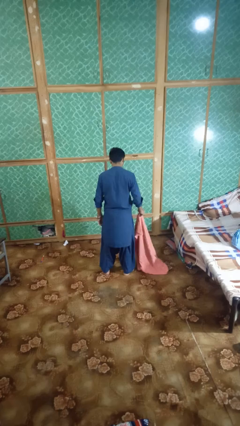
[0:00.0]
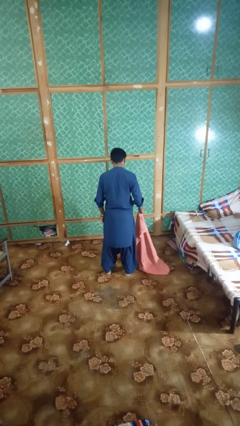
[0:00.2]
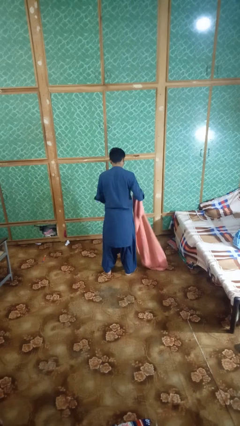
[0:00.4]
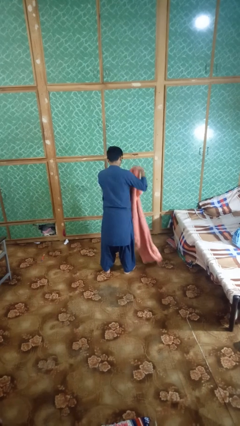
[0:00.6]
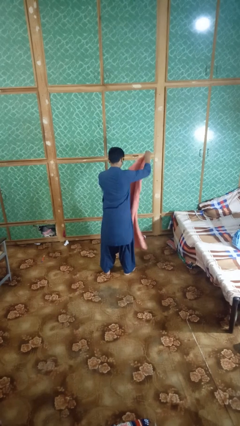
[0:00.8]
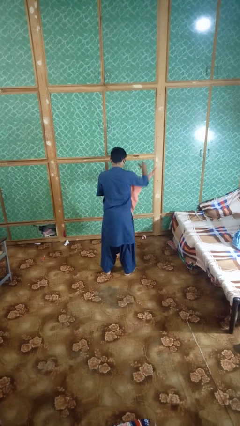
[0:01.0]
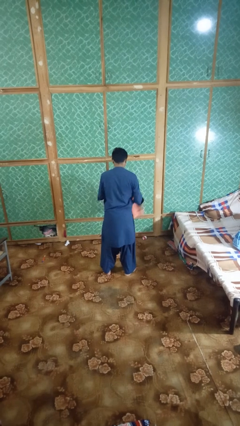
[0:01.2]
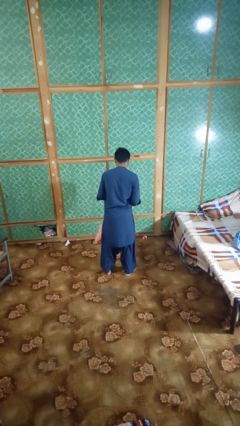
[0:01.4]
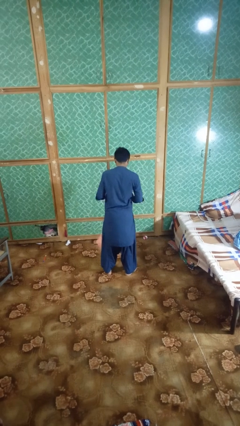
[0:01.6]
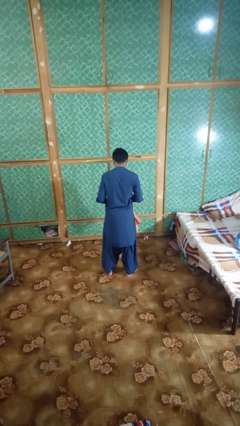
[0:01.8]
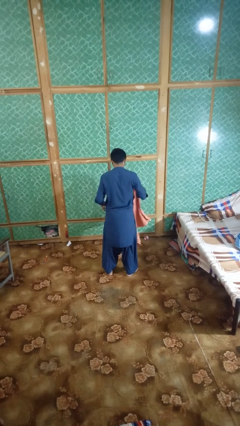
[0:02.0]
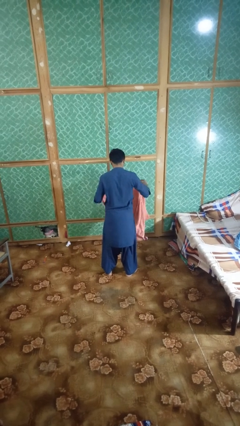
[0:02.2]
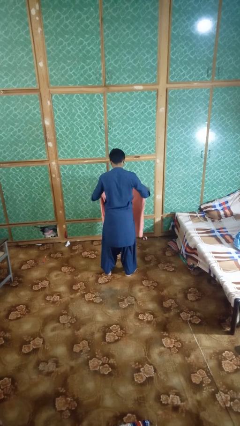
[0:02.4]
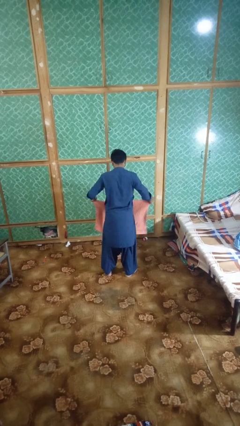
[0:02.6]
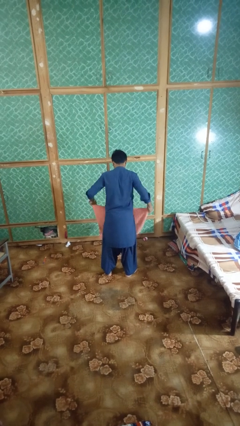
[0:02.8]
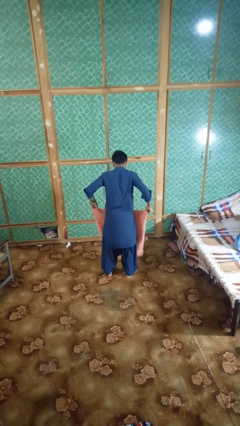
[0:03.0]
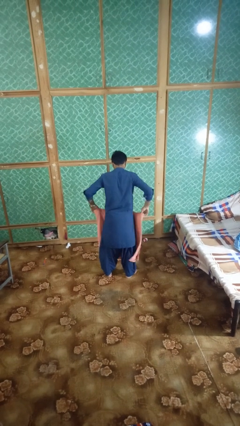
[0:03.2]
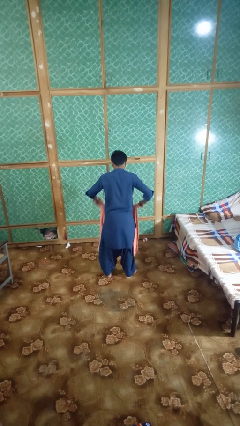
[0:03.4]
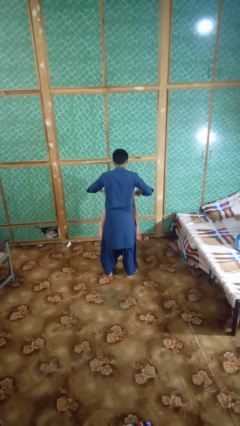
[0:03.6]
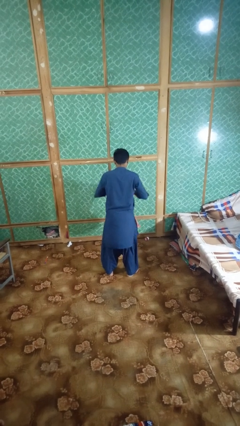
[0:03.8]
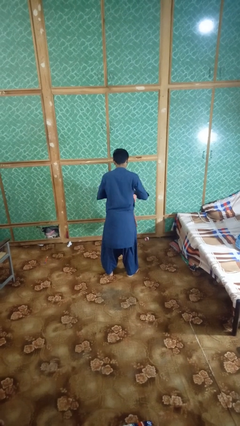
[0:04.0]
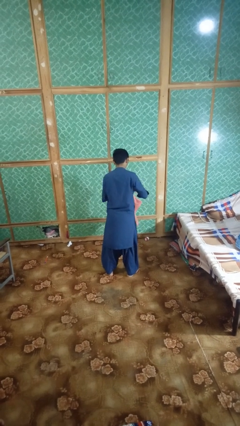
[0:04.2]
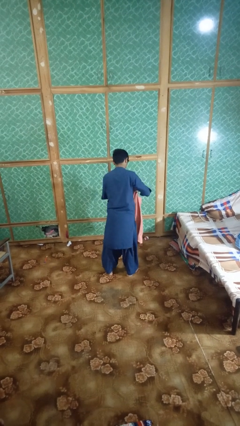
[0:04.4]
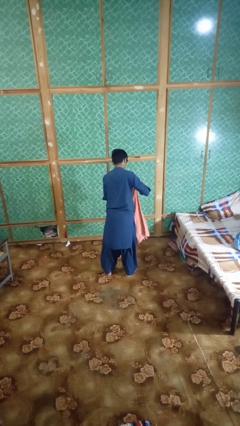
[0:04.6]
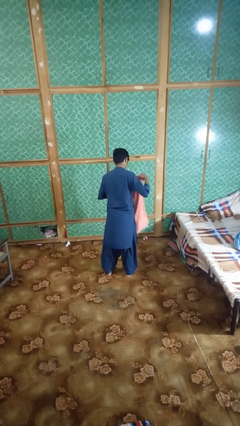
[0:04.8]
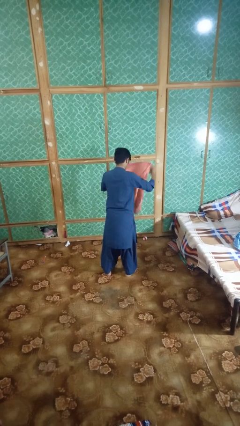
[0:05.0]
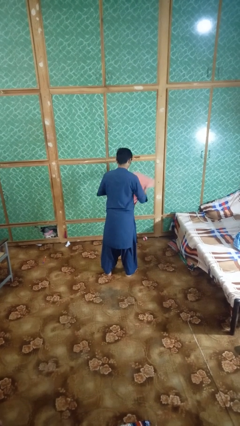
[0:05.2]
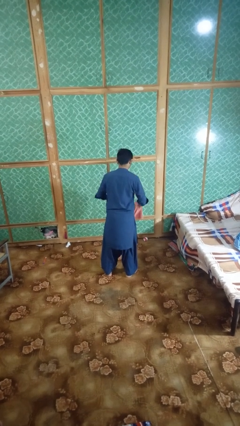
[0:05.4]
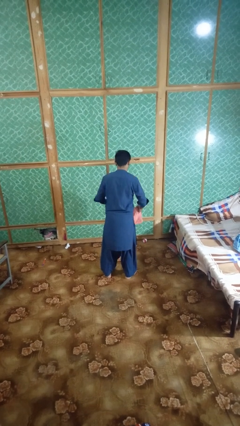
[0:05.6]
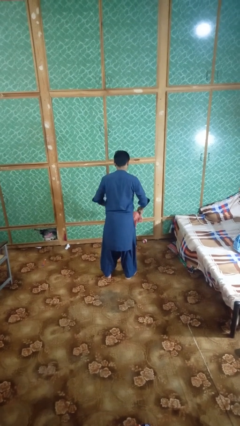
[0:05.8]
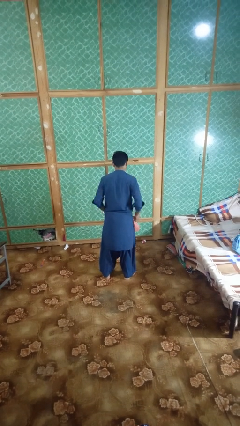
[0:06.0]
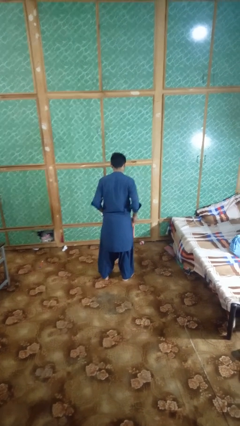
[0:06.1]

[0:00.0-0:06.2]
person folds towel

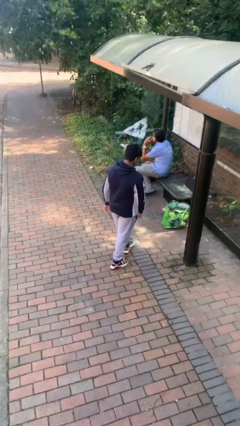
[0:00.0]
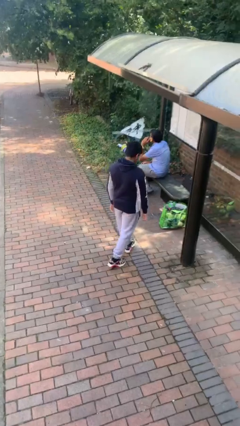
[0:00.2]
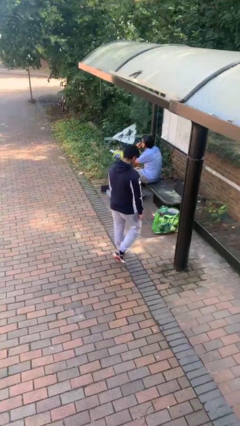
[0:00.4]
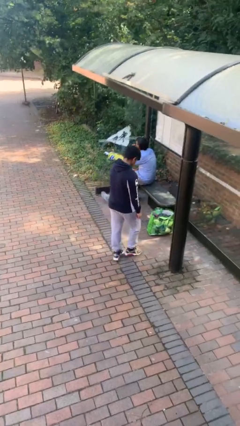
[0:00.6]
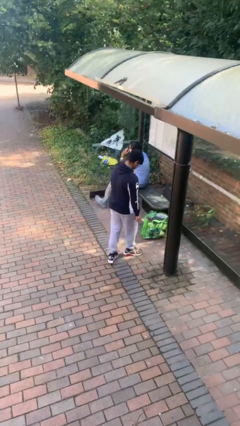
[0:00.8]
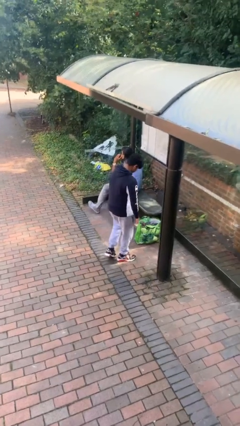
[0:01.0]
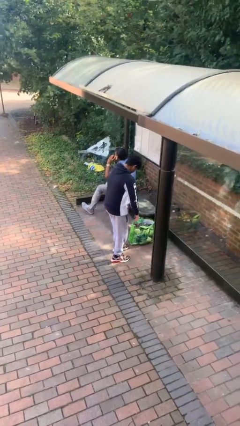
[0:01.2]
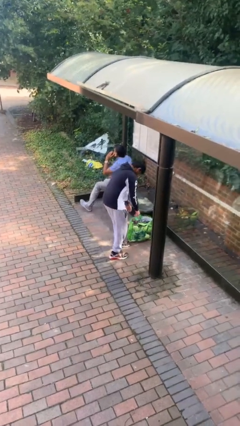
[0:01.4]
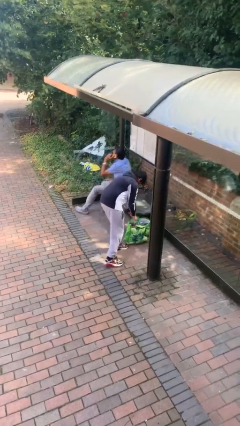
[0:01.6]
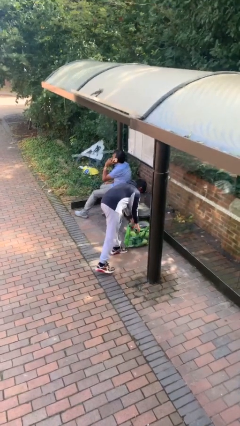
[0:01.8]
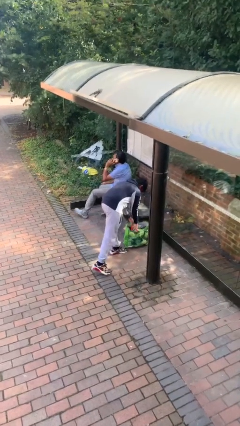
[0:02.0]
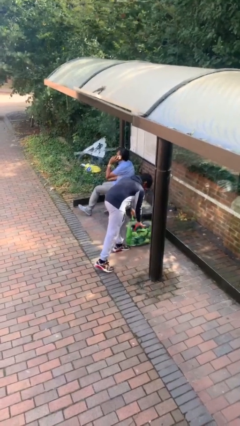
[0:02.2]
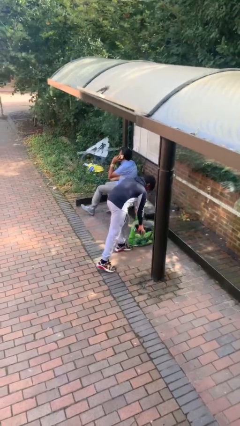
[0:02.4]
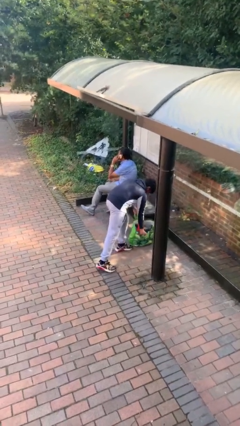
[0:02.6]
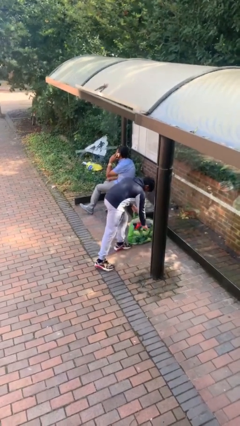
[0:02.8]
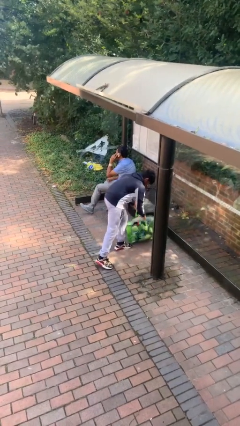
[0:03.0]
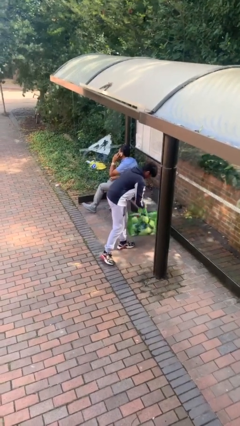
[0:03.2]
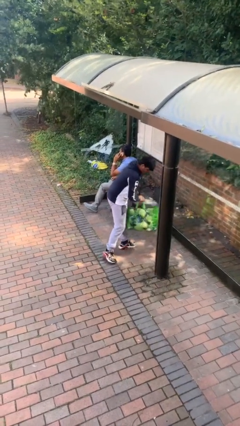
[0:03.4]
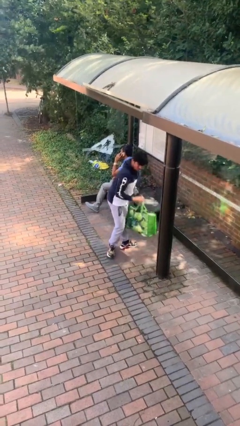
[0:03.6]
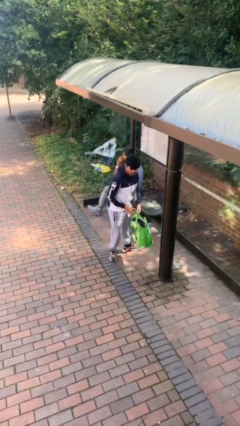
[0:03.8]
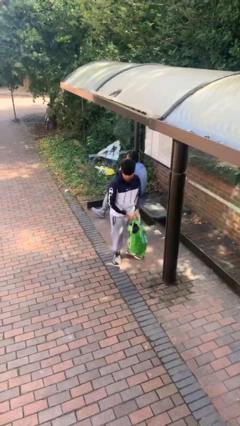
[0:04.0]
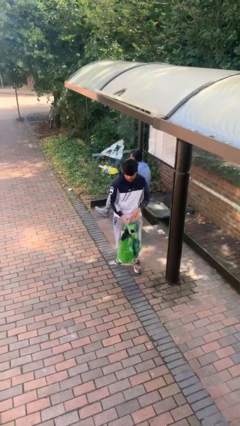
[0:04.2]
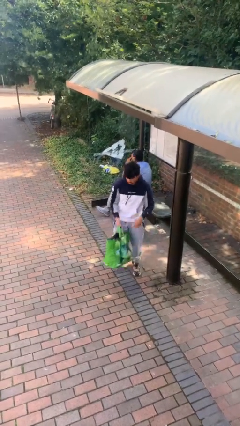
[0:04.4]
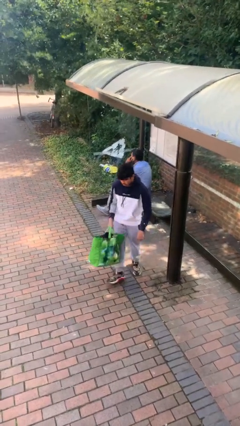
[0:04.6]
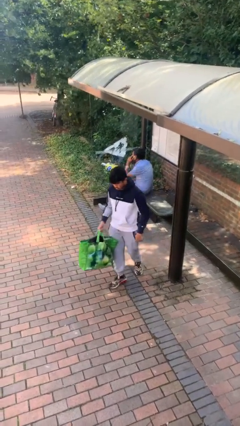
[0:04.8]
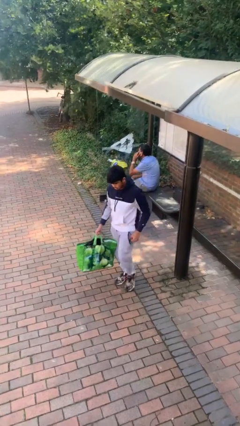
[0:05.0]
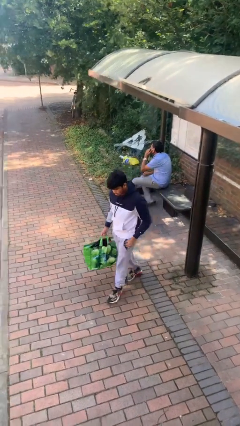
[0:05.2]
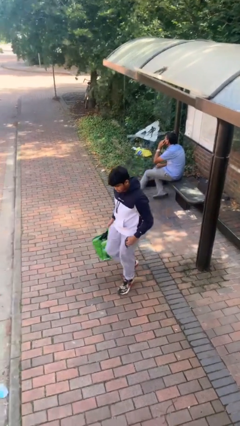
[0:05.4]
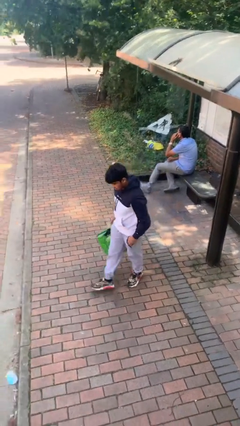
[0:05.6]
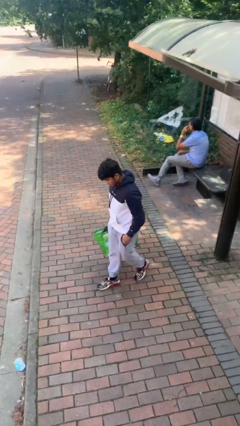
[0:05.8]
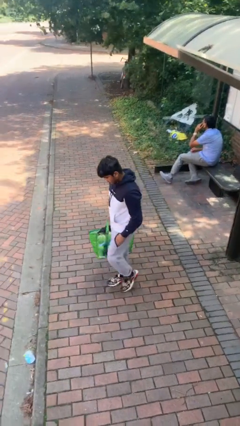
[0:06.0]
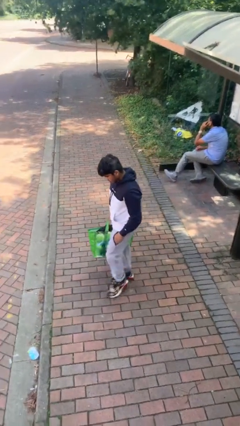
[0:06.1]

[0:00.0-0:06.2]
person steals object from person

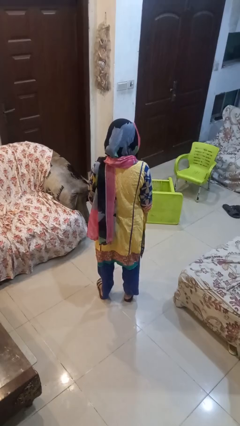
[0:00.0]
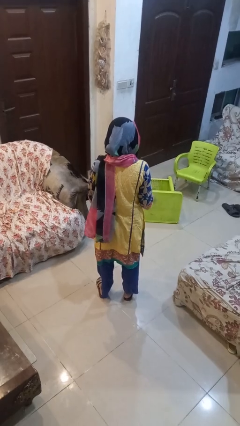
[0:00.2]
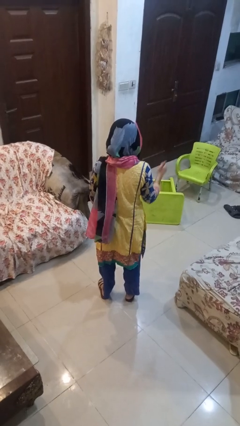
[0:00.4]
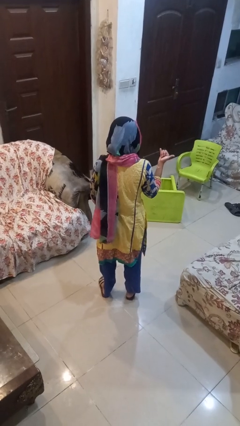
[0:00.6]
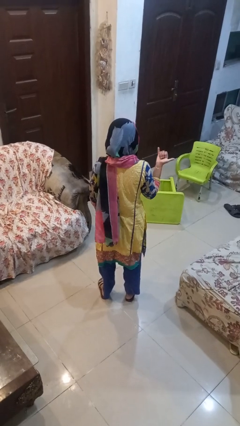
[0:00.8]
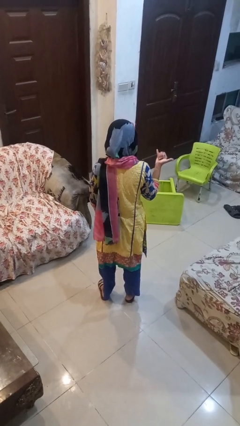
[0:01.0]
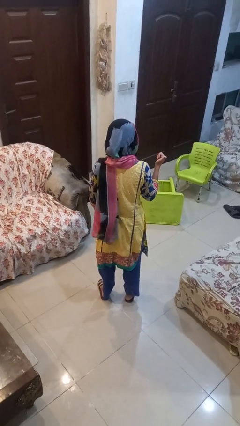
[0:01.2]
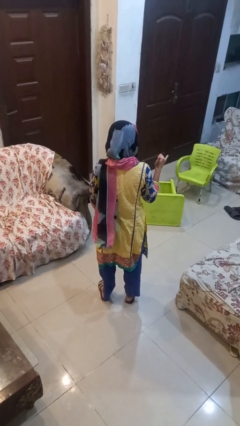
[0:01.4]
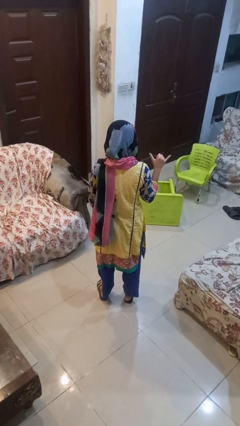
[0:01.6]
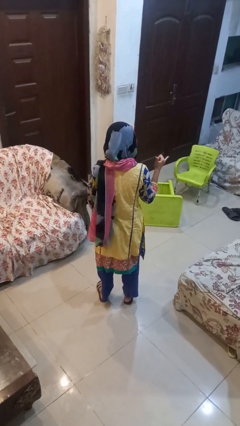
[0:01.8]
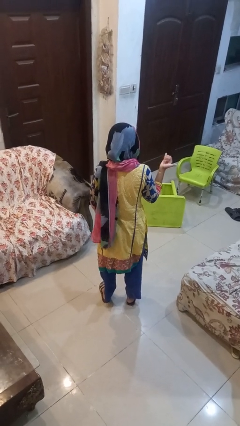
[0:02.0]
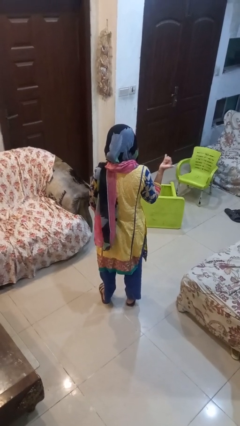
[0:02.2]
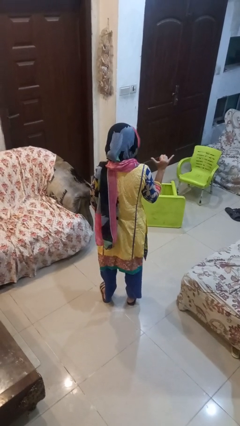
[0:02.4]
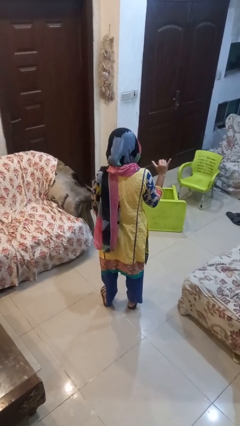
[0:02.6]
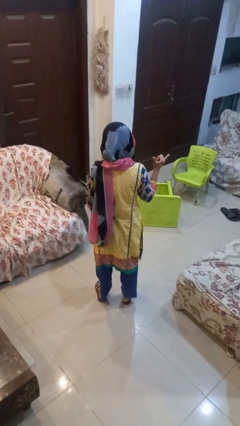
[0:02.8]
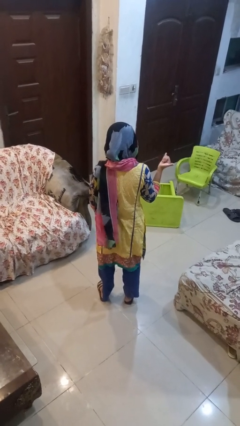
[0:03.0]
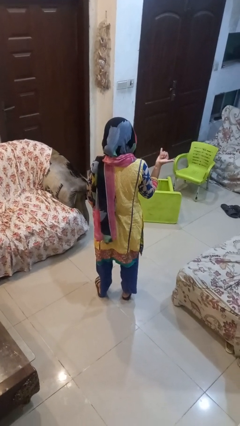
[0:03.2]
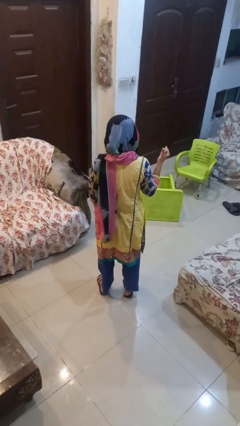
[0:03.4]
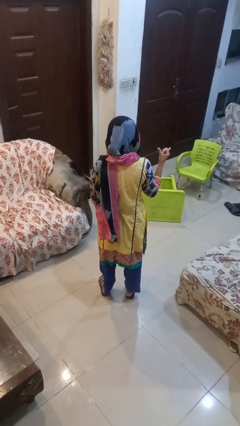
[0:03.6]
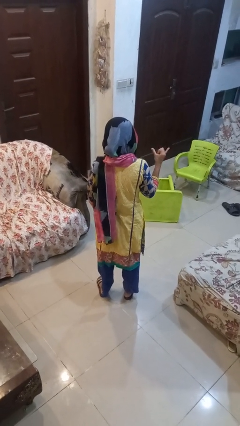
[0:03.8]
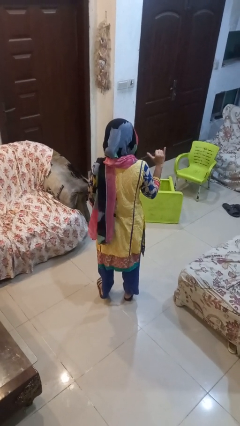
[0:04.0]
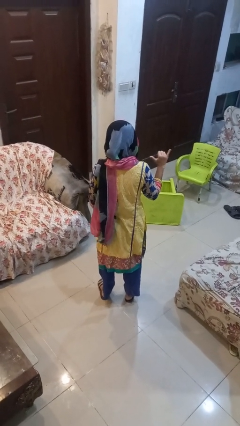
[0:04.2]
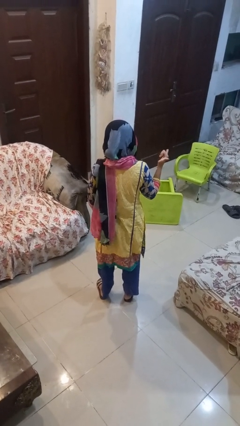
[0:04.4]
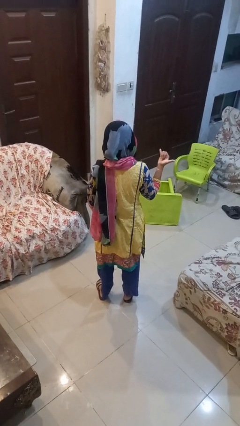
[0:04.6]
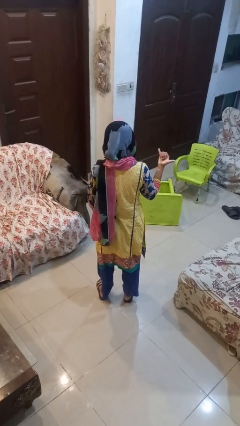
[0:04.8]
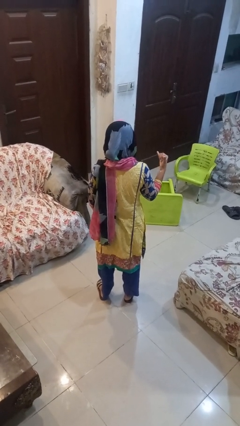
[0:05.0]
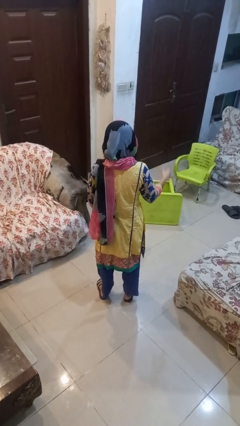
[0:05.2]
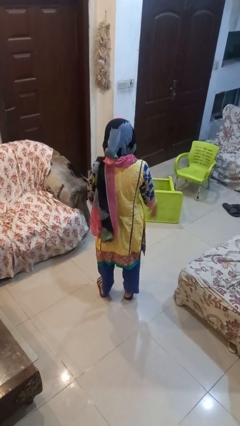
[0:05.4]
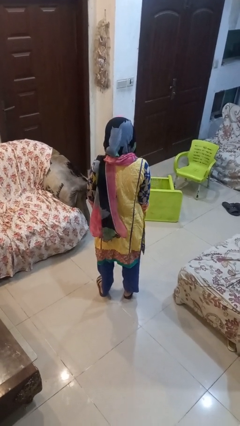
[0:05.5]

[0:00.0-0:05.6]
person gestures hang loose
